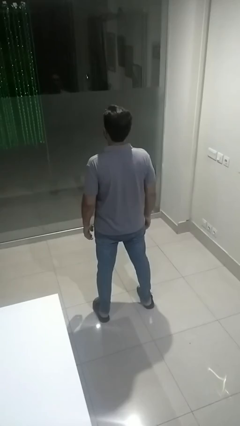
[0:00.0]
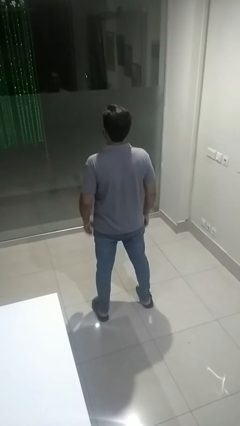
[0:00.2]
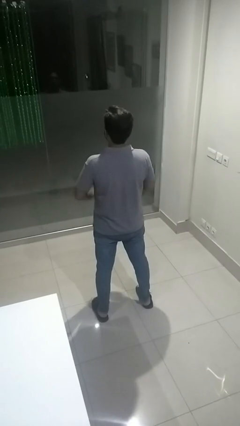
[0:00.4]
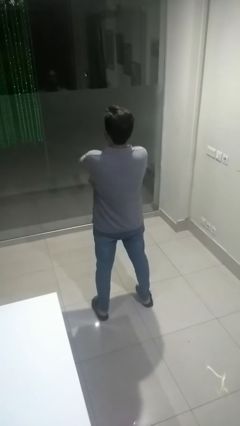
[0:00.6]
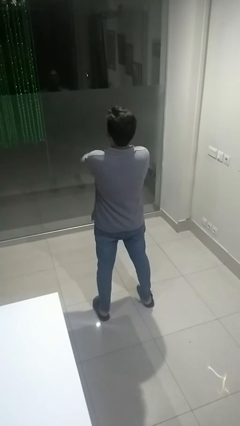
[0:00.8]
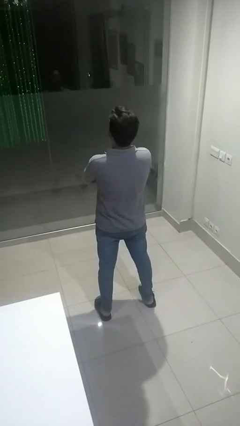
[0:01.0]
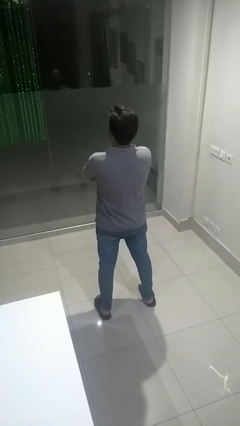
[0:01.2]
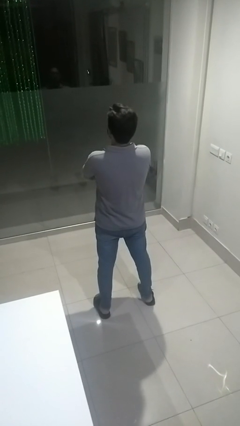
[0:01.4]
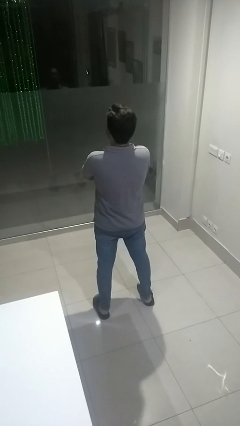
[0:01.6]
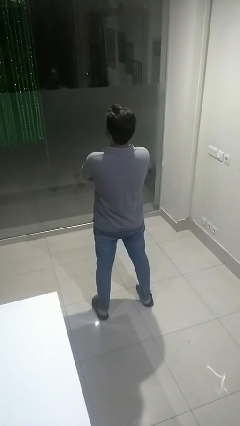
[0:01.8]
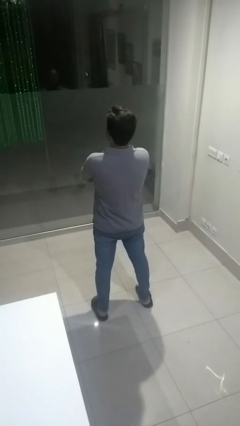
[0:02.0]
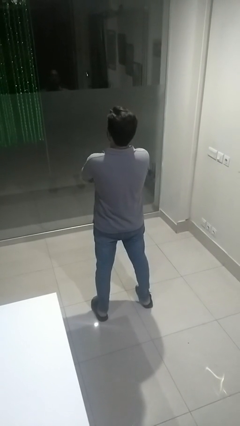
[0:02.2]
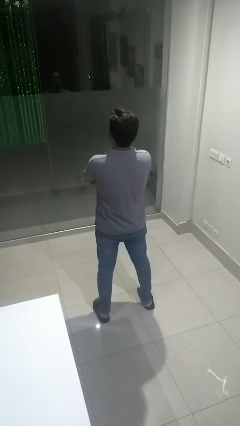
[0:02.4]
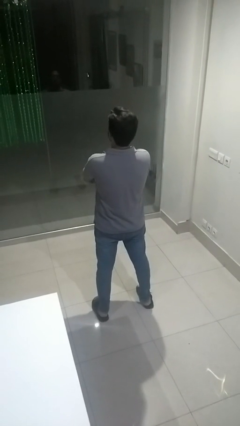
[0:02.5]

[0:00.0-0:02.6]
person crosses arms

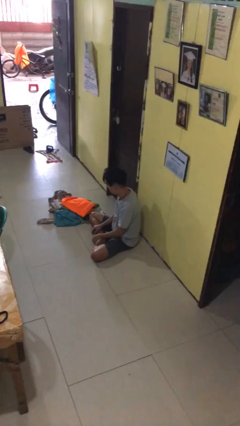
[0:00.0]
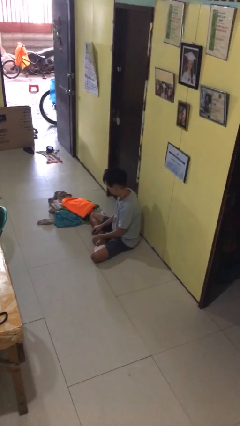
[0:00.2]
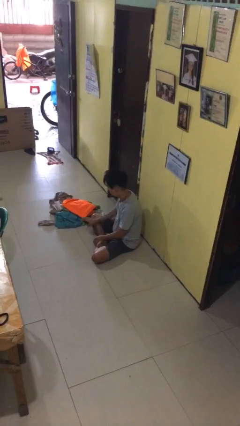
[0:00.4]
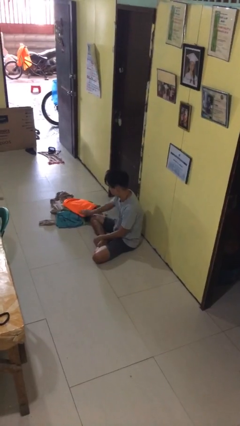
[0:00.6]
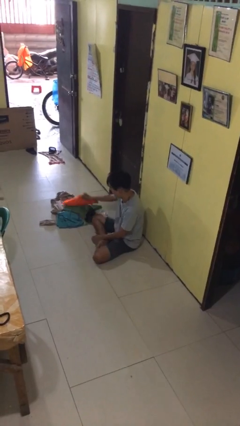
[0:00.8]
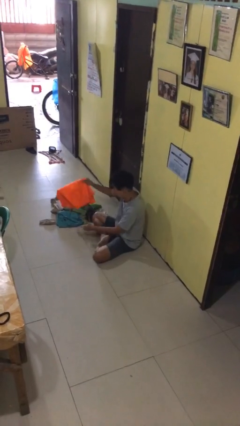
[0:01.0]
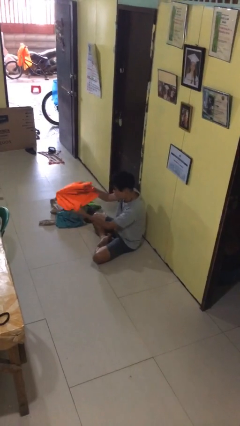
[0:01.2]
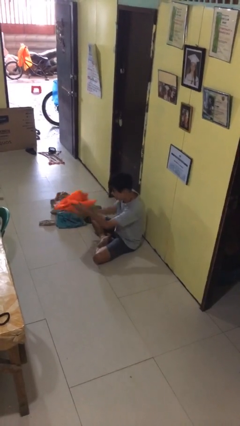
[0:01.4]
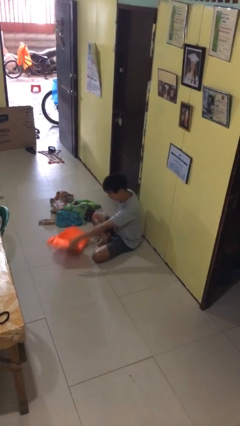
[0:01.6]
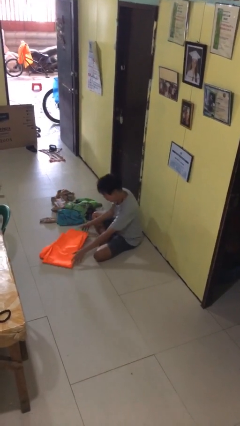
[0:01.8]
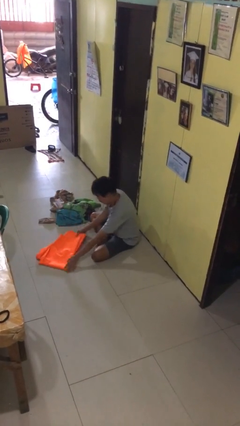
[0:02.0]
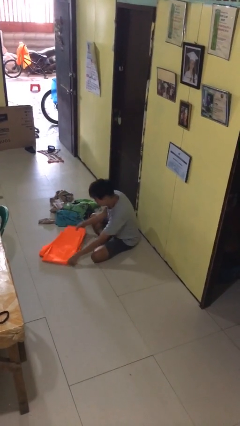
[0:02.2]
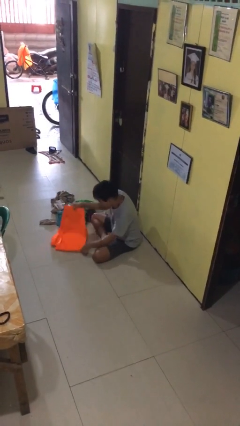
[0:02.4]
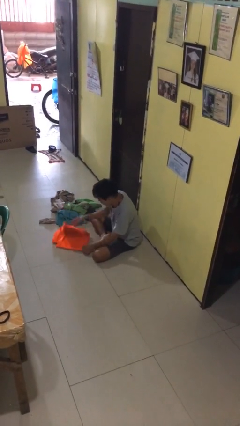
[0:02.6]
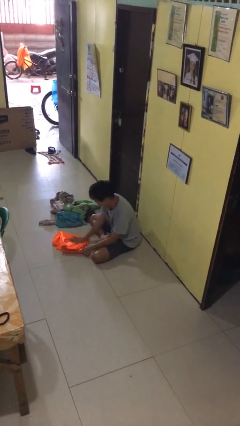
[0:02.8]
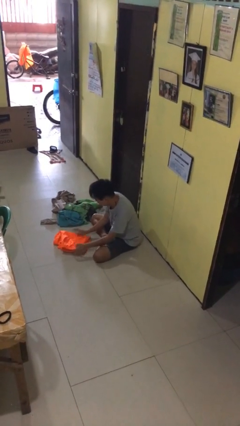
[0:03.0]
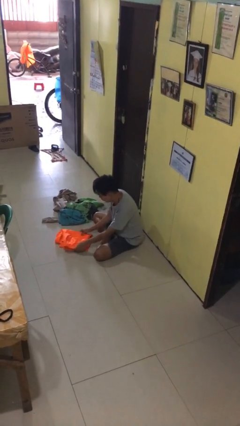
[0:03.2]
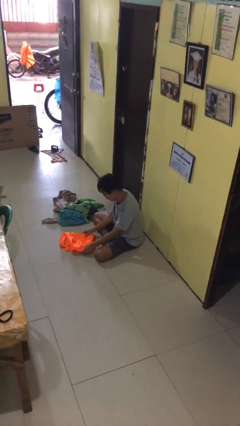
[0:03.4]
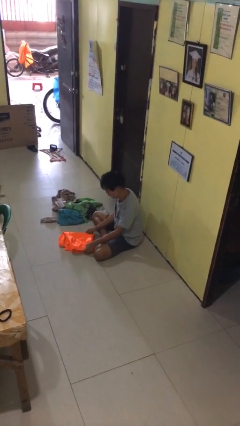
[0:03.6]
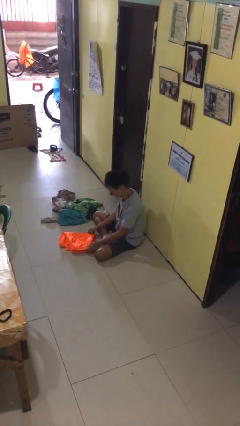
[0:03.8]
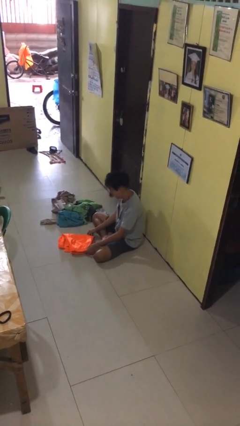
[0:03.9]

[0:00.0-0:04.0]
person folds pants

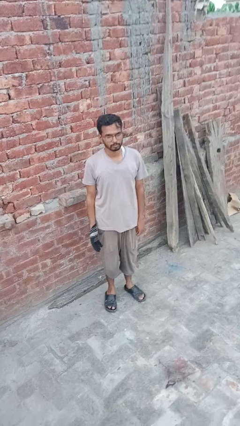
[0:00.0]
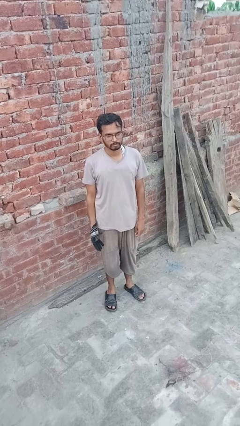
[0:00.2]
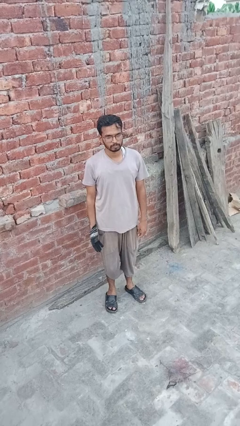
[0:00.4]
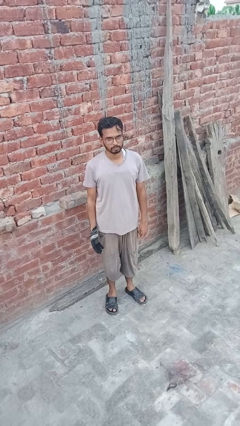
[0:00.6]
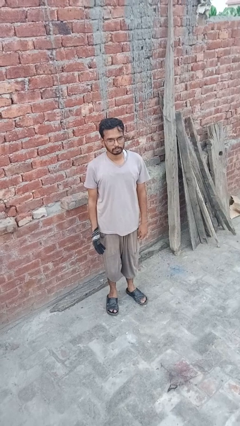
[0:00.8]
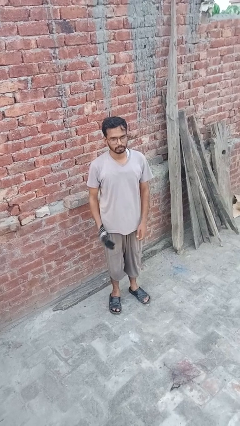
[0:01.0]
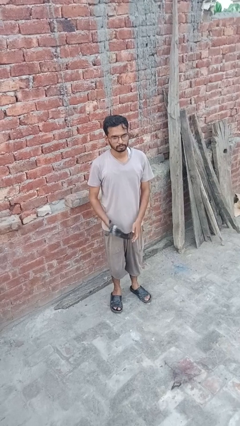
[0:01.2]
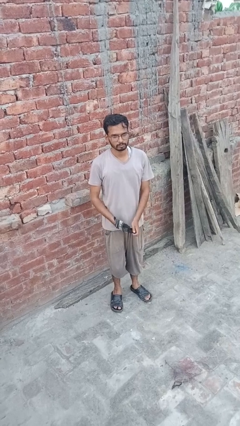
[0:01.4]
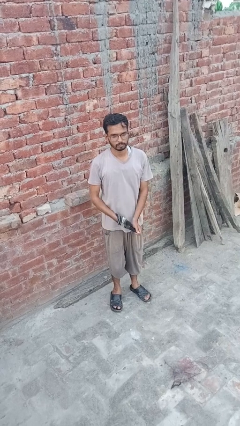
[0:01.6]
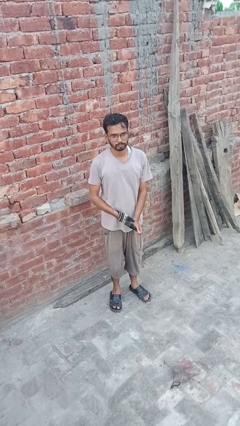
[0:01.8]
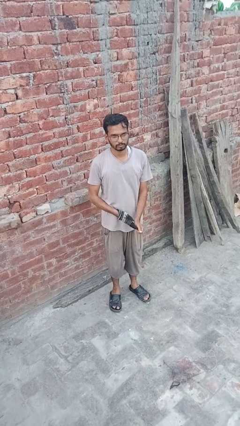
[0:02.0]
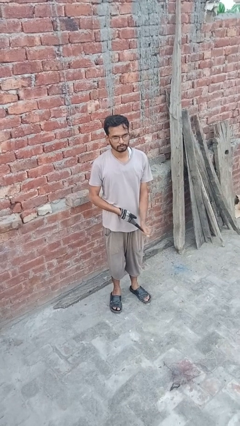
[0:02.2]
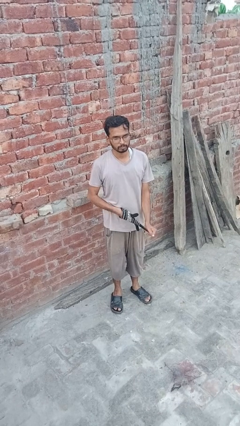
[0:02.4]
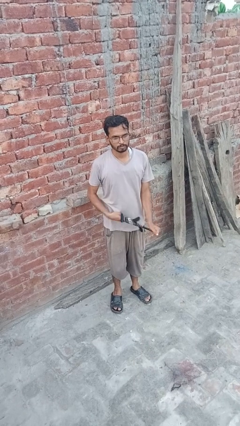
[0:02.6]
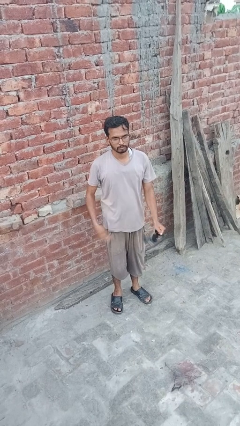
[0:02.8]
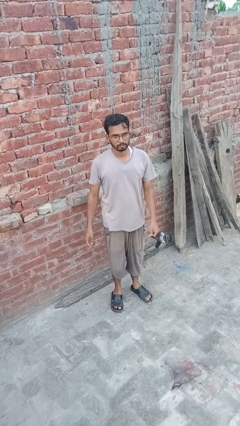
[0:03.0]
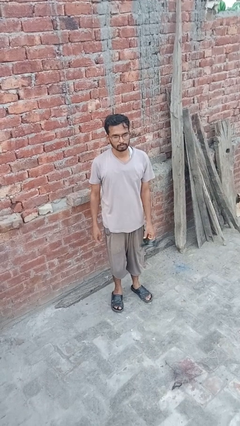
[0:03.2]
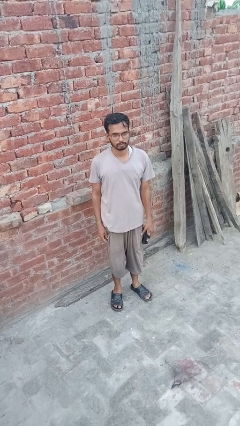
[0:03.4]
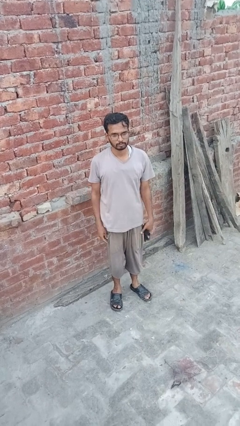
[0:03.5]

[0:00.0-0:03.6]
person takes off gloves

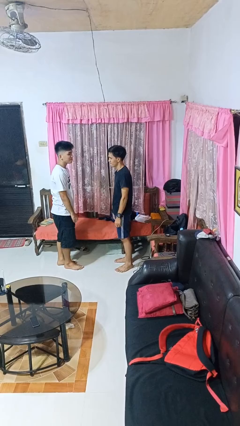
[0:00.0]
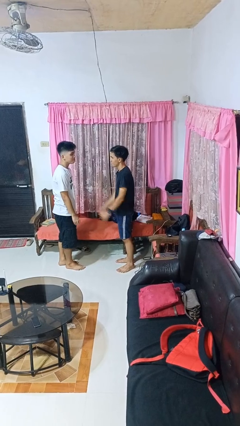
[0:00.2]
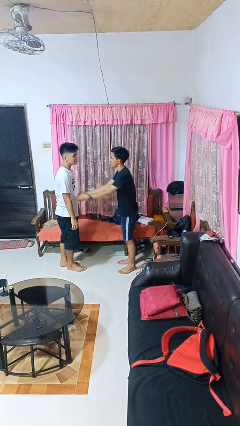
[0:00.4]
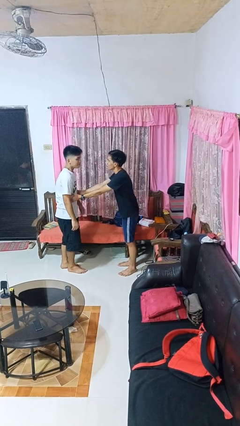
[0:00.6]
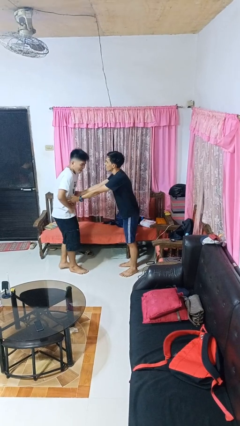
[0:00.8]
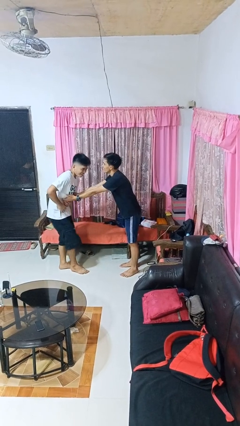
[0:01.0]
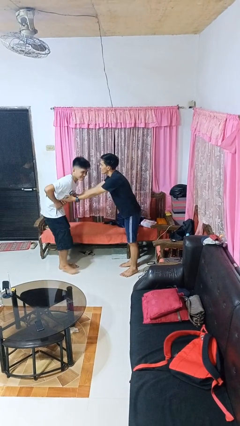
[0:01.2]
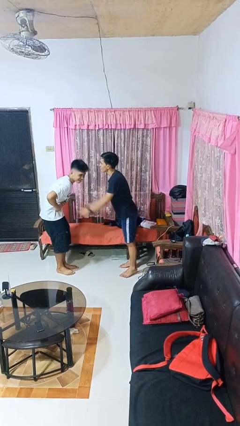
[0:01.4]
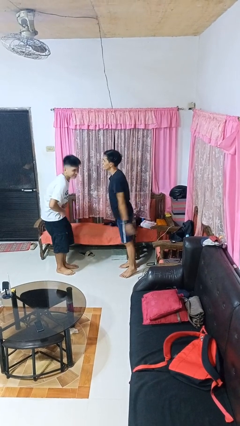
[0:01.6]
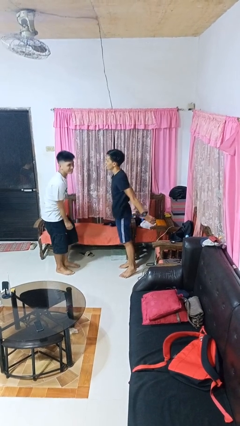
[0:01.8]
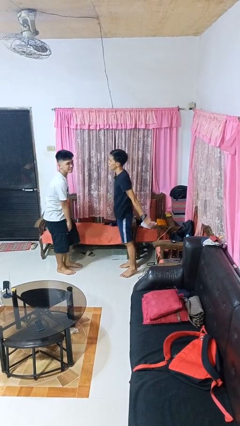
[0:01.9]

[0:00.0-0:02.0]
person tickles person

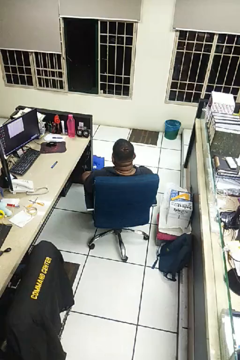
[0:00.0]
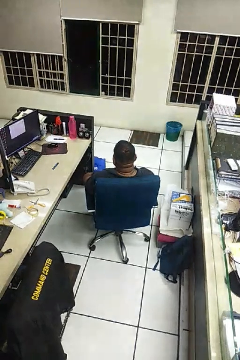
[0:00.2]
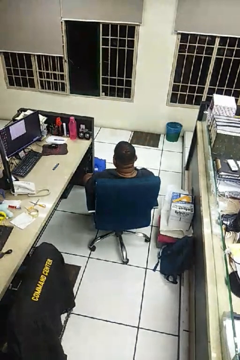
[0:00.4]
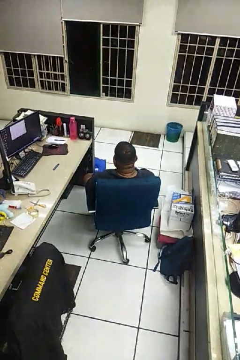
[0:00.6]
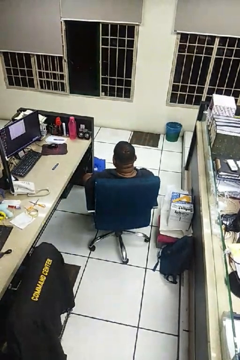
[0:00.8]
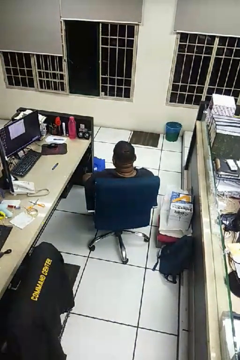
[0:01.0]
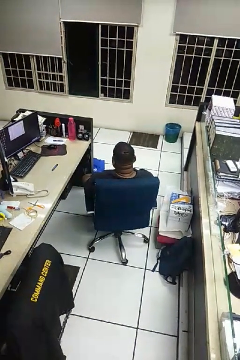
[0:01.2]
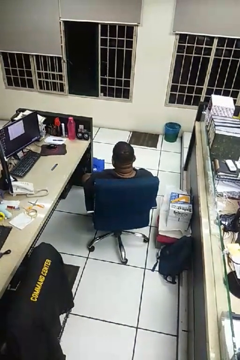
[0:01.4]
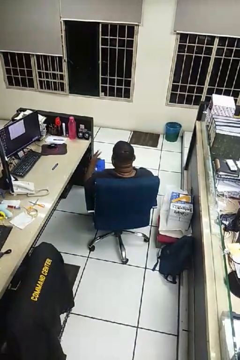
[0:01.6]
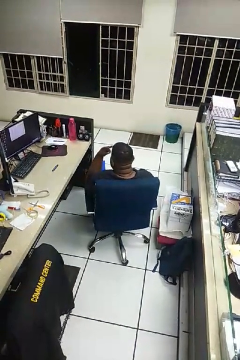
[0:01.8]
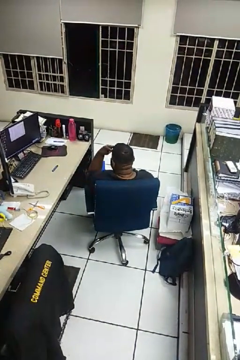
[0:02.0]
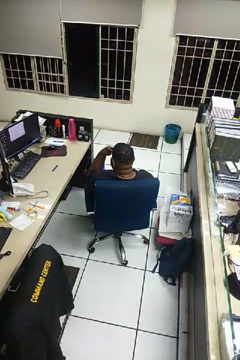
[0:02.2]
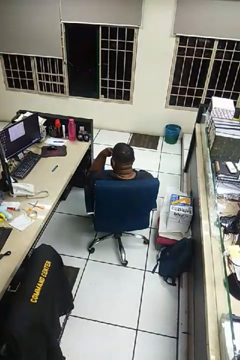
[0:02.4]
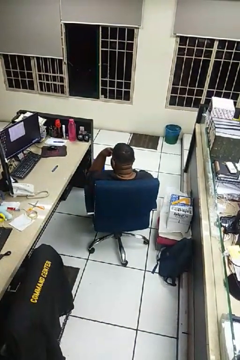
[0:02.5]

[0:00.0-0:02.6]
person gestures watch closely

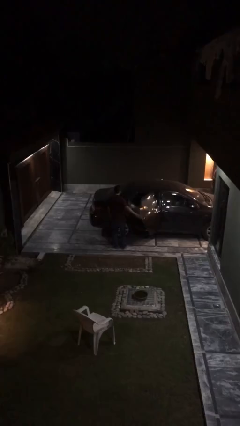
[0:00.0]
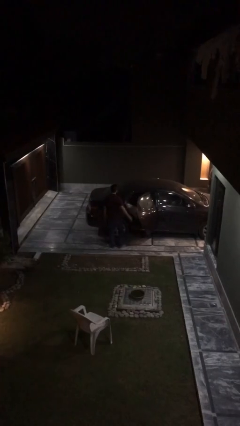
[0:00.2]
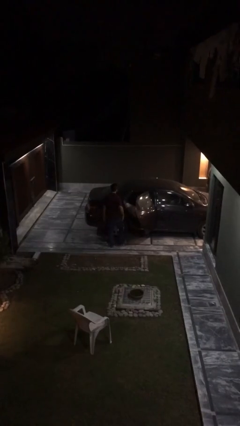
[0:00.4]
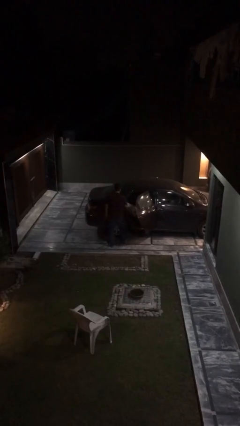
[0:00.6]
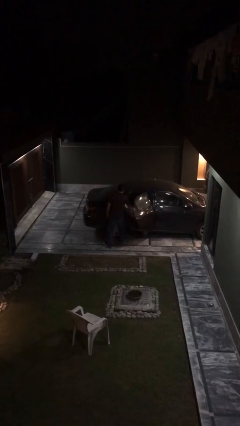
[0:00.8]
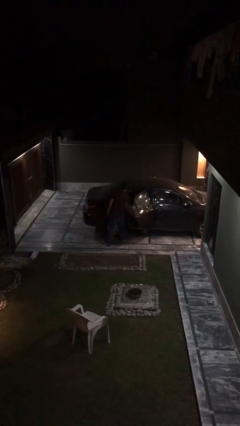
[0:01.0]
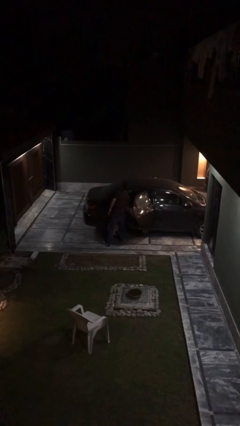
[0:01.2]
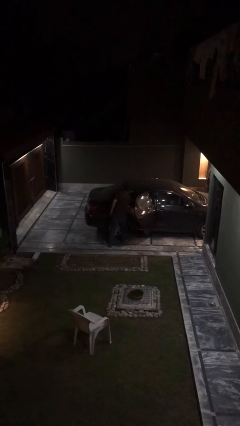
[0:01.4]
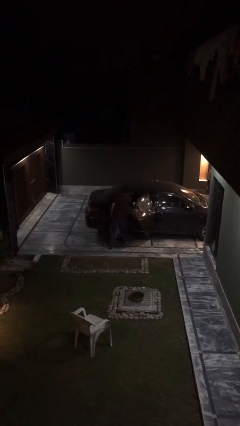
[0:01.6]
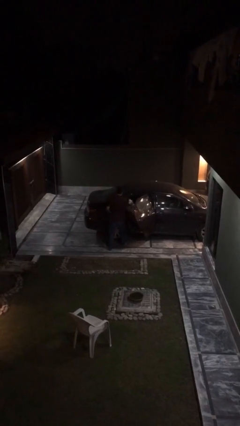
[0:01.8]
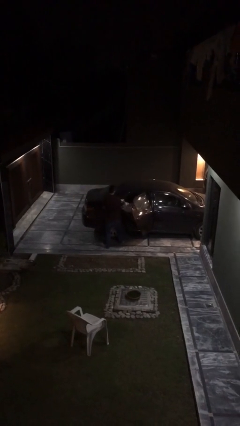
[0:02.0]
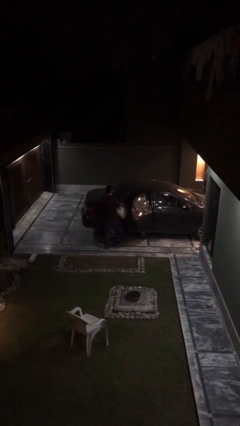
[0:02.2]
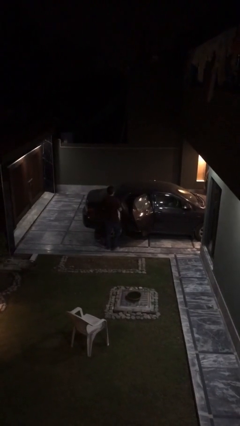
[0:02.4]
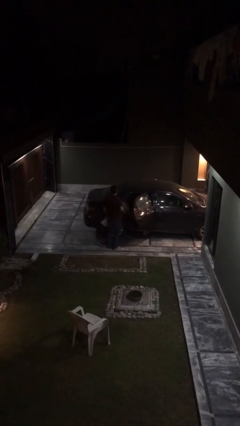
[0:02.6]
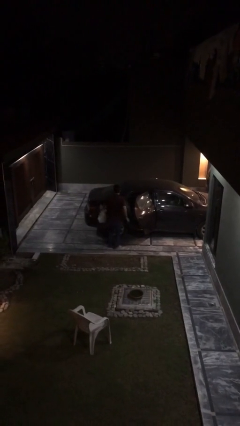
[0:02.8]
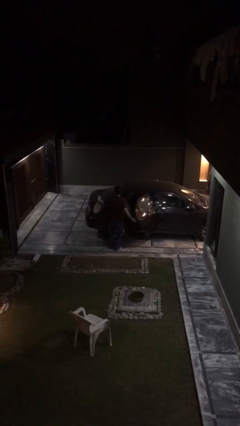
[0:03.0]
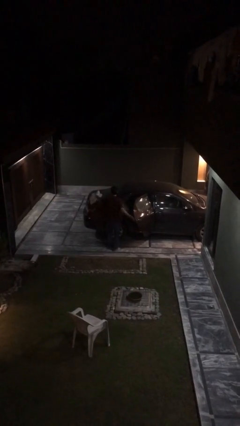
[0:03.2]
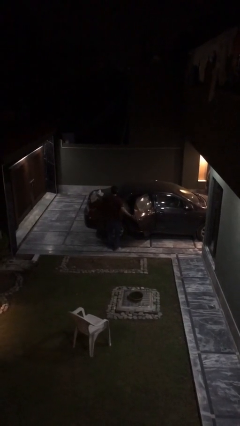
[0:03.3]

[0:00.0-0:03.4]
person unloads car
